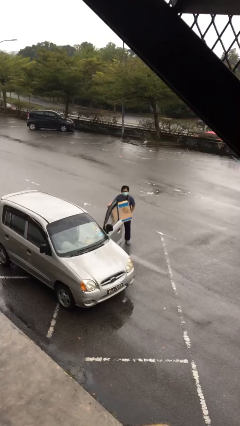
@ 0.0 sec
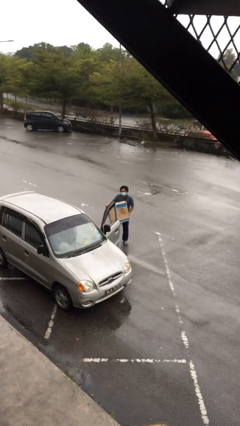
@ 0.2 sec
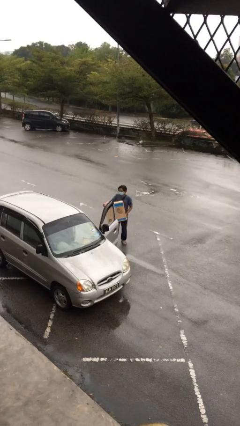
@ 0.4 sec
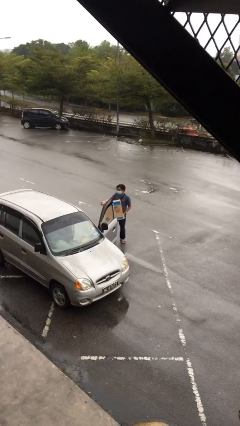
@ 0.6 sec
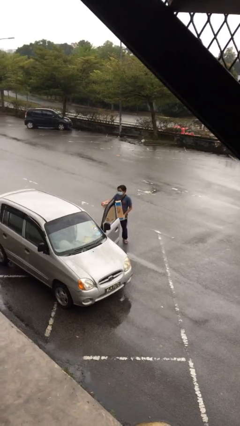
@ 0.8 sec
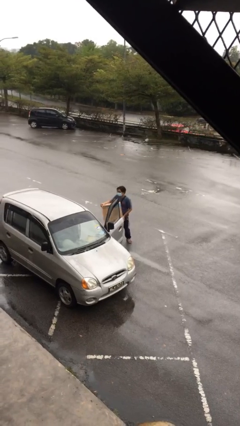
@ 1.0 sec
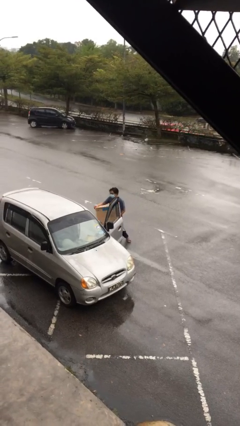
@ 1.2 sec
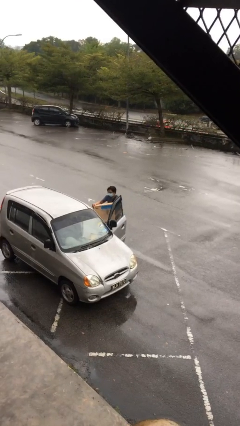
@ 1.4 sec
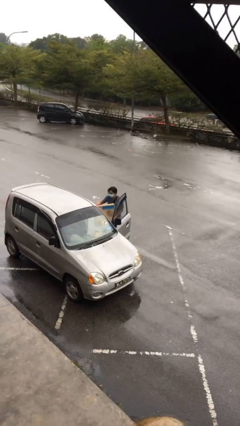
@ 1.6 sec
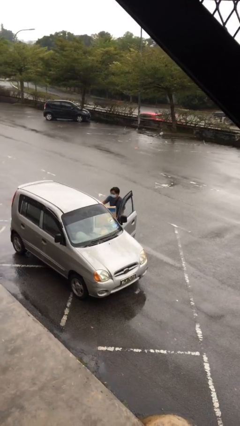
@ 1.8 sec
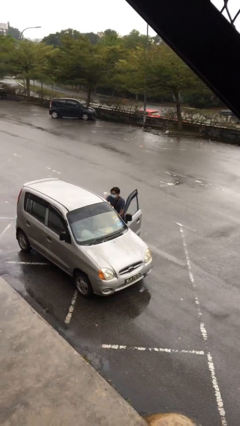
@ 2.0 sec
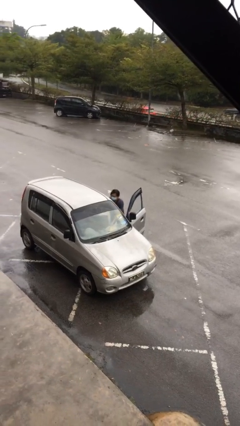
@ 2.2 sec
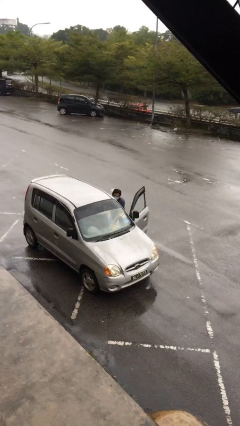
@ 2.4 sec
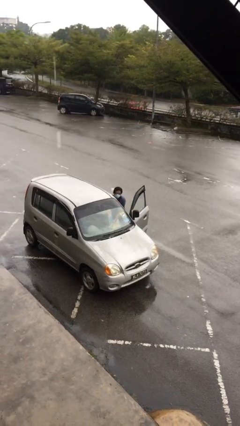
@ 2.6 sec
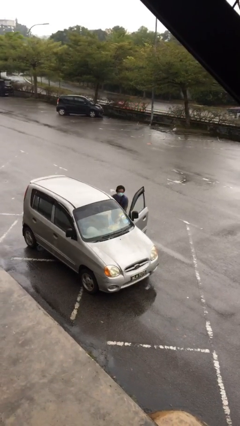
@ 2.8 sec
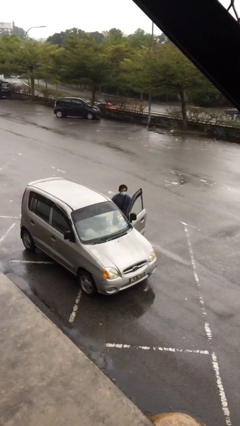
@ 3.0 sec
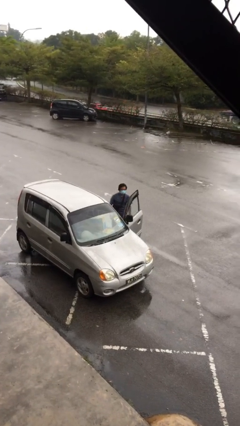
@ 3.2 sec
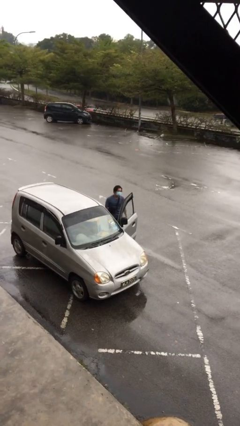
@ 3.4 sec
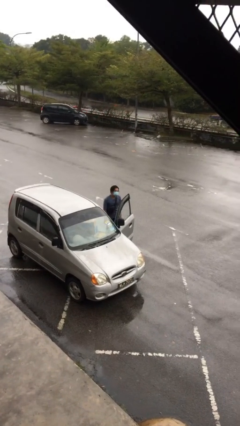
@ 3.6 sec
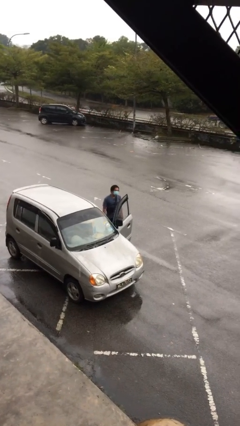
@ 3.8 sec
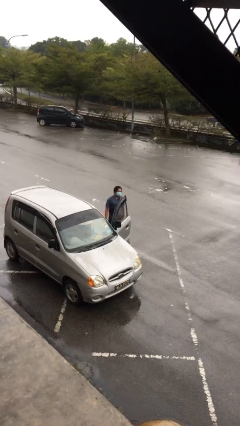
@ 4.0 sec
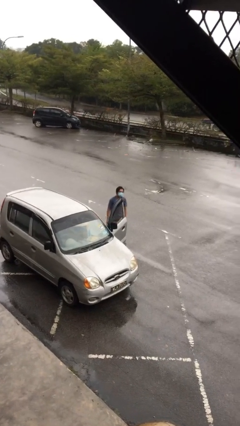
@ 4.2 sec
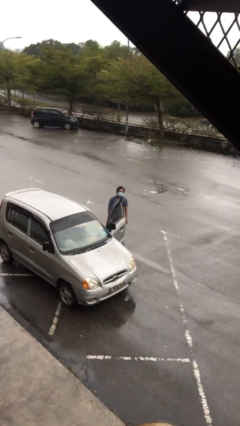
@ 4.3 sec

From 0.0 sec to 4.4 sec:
person loads car

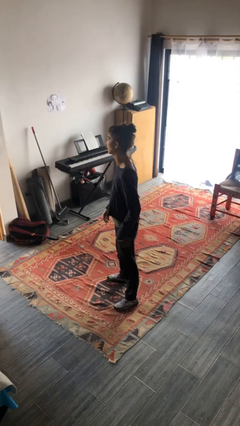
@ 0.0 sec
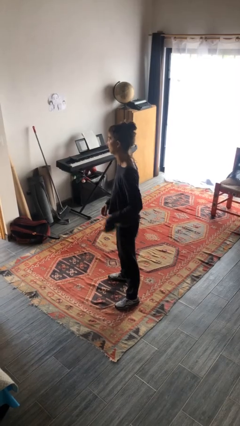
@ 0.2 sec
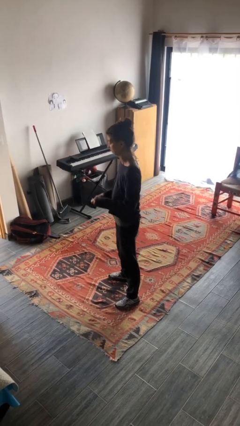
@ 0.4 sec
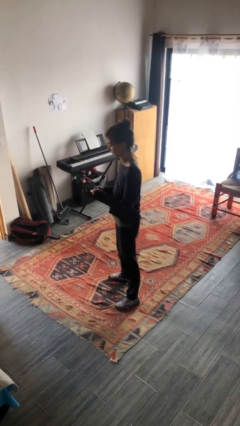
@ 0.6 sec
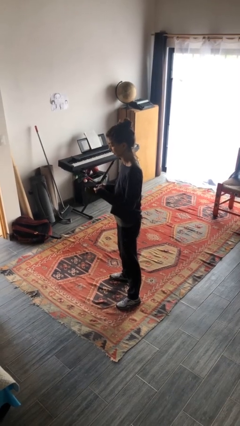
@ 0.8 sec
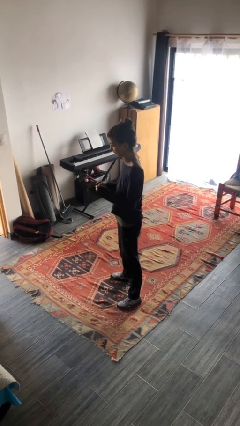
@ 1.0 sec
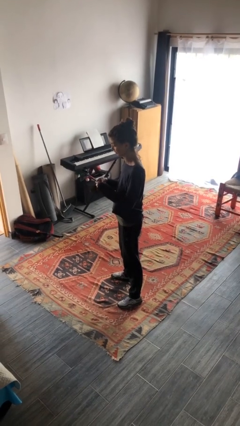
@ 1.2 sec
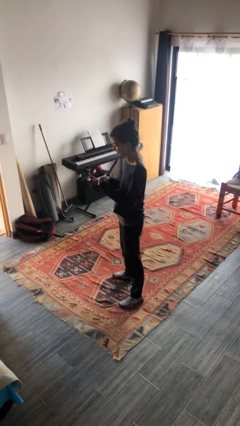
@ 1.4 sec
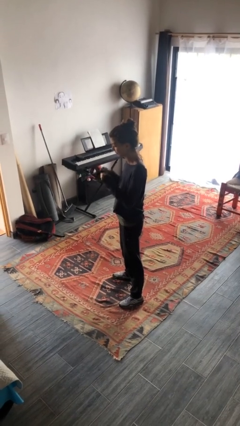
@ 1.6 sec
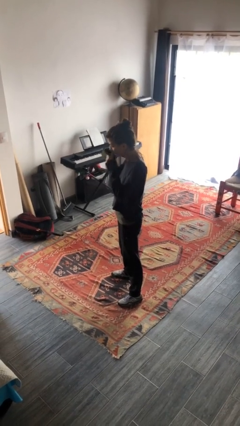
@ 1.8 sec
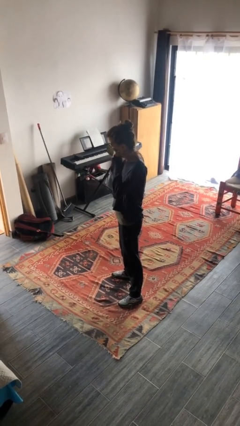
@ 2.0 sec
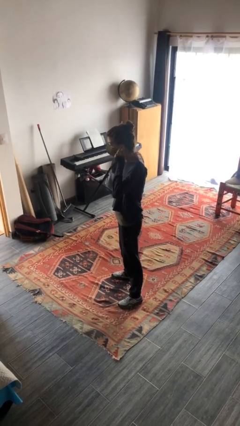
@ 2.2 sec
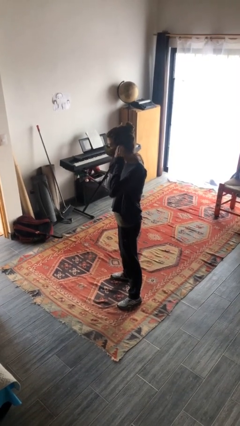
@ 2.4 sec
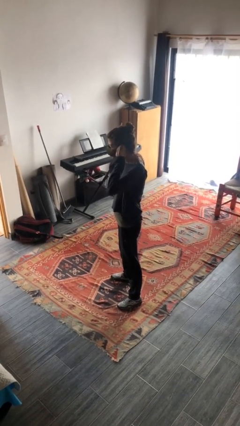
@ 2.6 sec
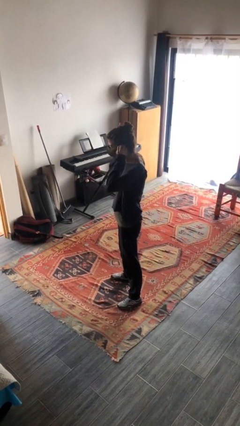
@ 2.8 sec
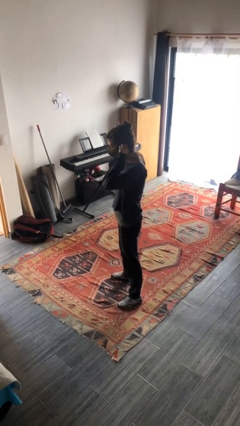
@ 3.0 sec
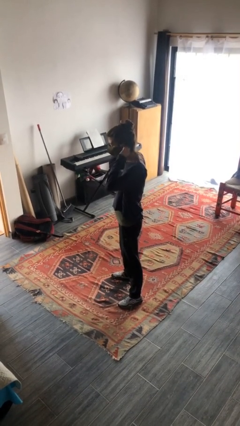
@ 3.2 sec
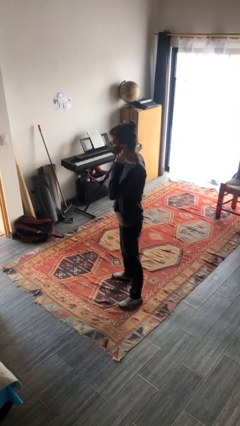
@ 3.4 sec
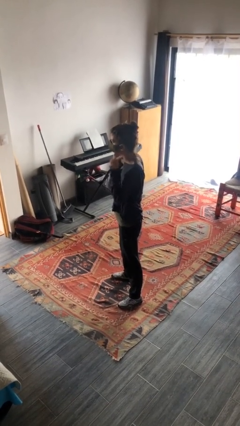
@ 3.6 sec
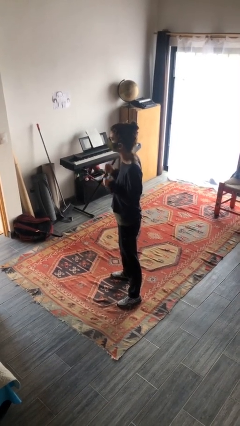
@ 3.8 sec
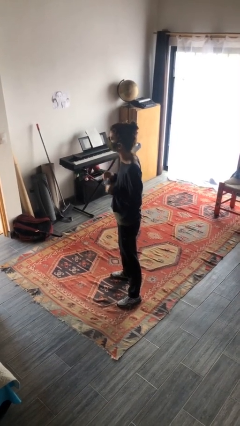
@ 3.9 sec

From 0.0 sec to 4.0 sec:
person puts on facemask

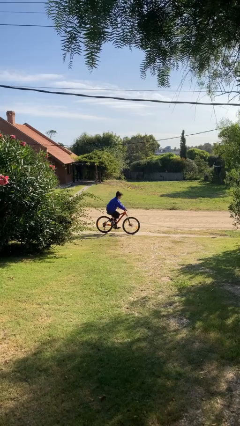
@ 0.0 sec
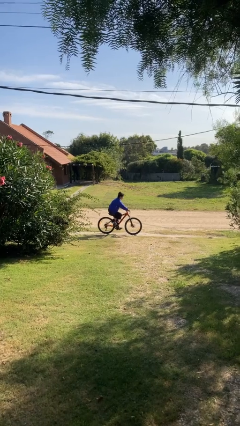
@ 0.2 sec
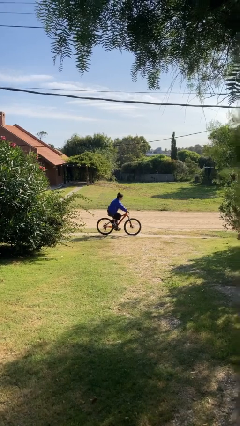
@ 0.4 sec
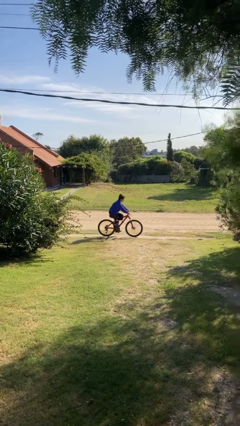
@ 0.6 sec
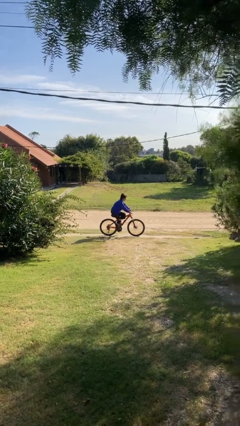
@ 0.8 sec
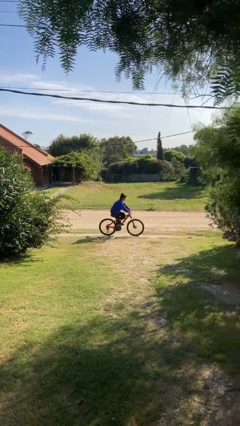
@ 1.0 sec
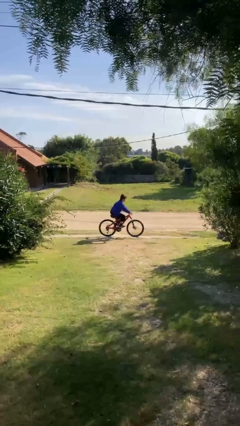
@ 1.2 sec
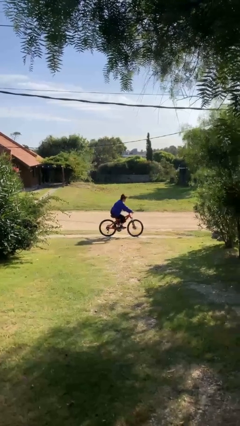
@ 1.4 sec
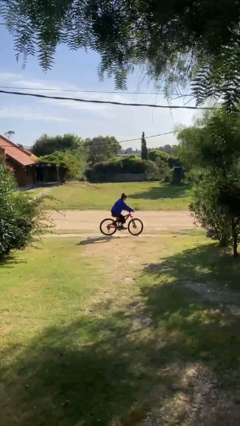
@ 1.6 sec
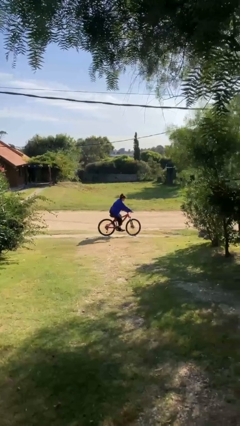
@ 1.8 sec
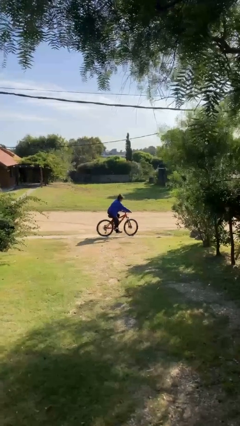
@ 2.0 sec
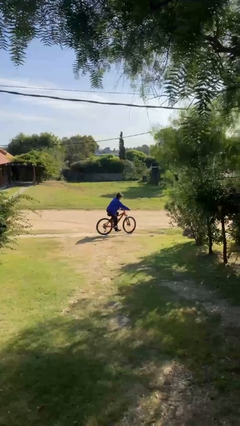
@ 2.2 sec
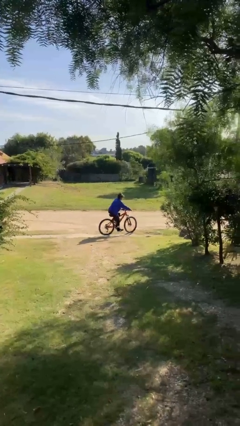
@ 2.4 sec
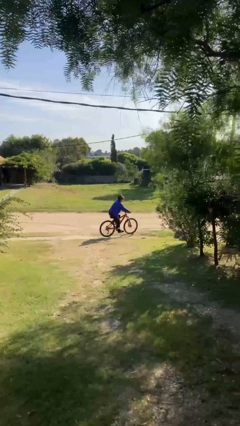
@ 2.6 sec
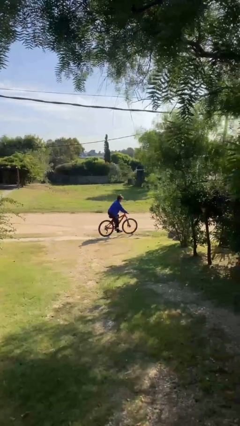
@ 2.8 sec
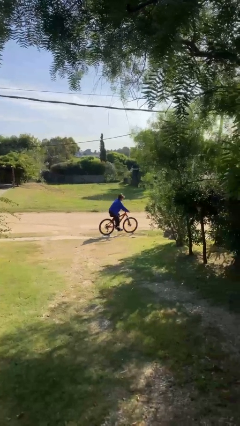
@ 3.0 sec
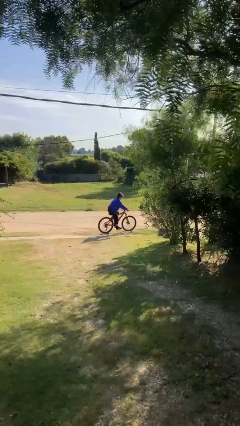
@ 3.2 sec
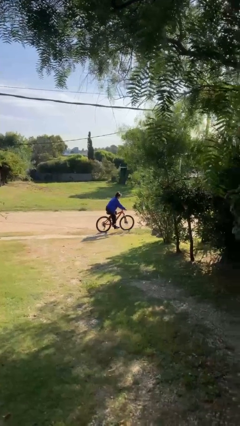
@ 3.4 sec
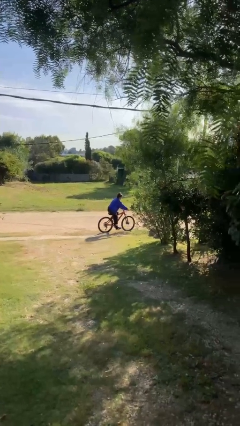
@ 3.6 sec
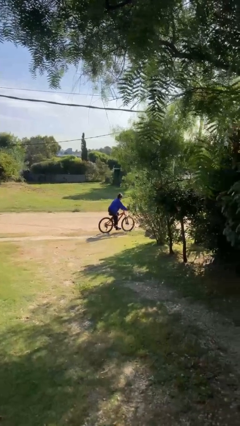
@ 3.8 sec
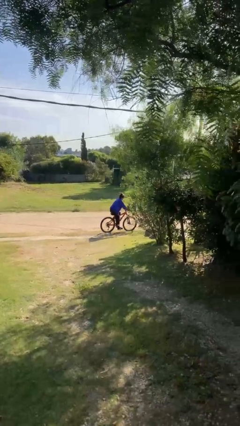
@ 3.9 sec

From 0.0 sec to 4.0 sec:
person rides bicycle

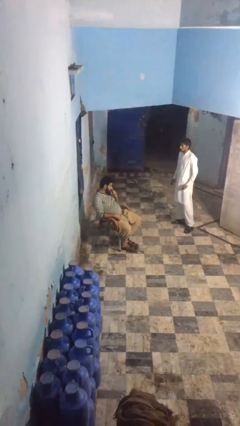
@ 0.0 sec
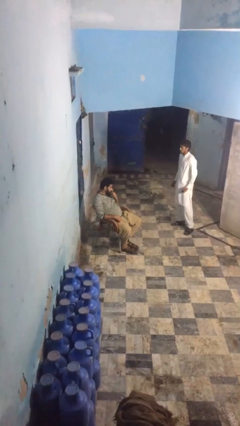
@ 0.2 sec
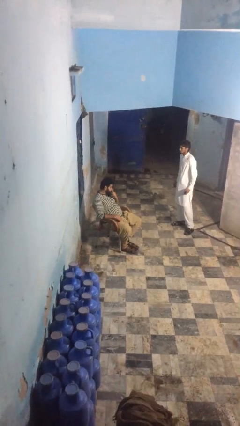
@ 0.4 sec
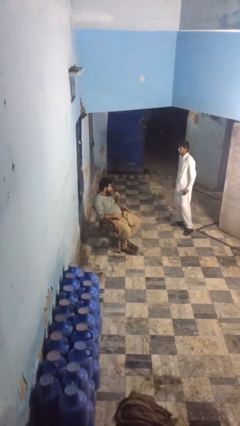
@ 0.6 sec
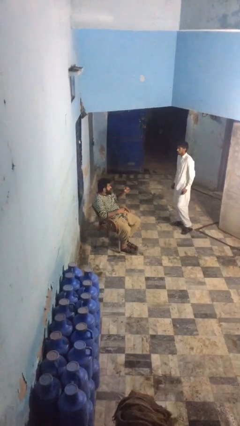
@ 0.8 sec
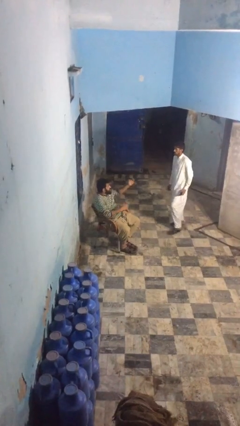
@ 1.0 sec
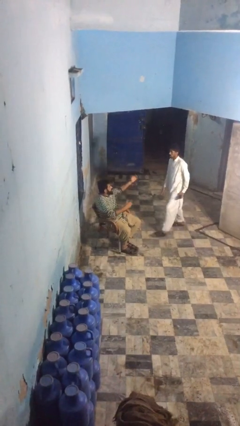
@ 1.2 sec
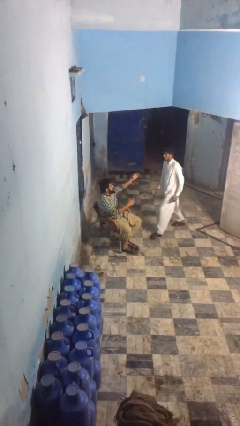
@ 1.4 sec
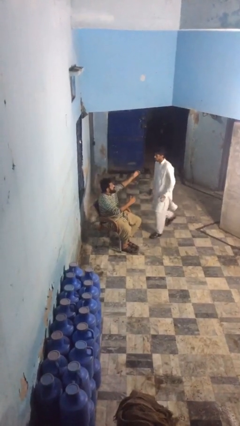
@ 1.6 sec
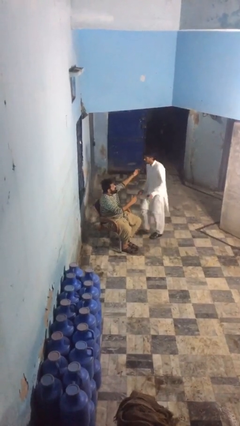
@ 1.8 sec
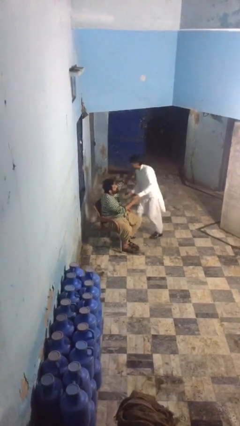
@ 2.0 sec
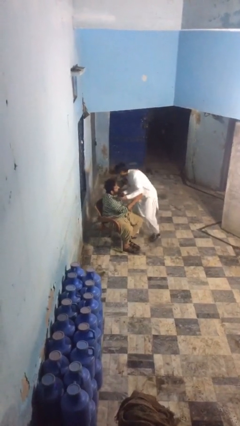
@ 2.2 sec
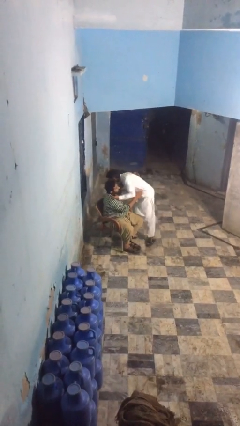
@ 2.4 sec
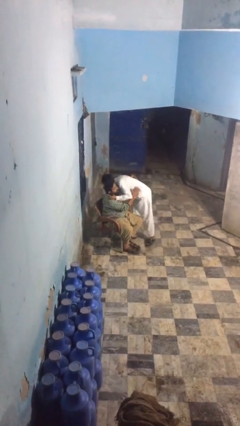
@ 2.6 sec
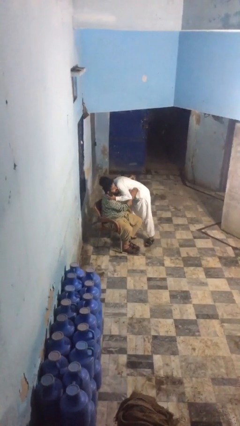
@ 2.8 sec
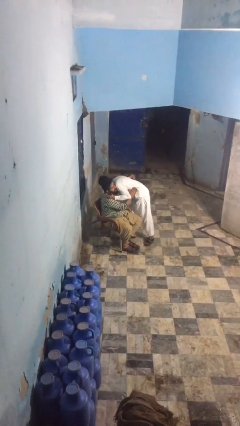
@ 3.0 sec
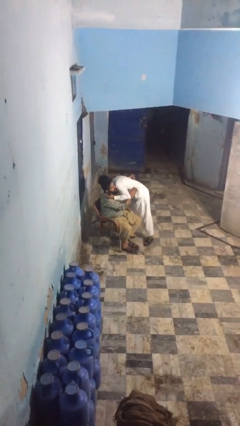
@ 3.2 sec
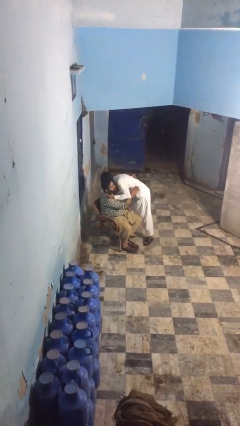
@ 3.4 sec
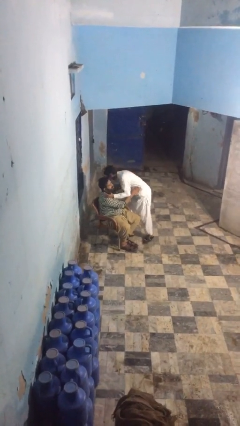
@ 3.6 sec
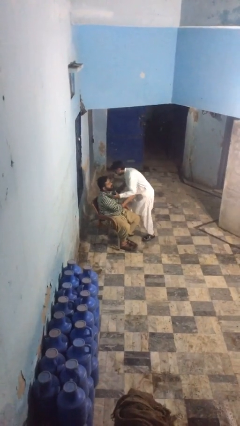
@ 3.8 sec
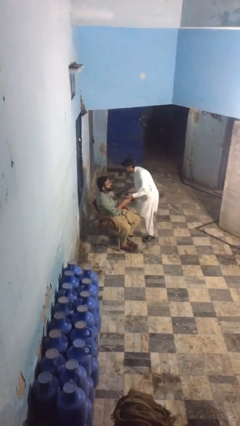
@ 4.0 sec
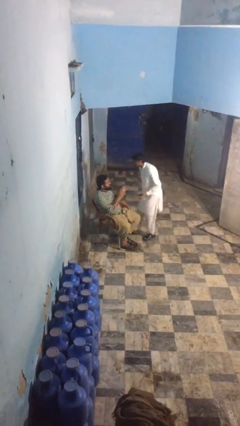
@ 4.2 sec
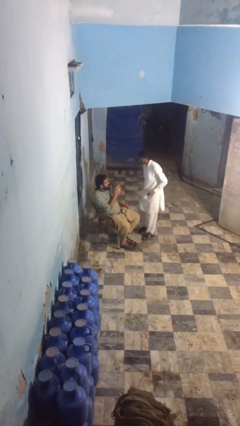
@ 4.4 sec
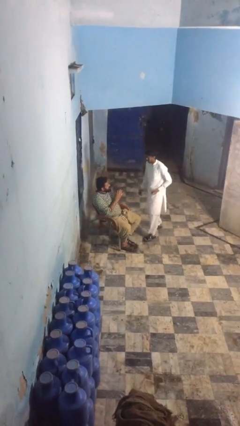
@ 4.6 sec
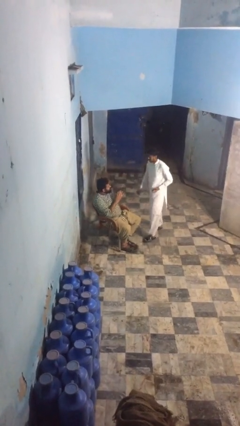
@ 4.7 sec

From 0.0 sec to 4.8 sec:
person embraces person

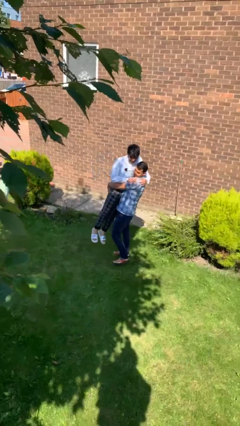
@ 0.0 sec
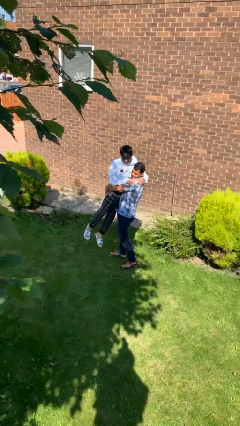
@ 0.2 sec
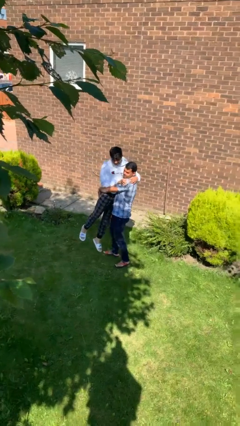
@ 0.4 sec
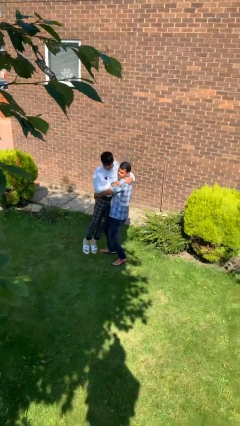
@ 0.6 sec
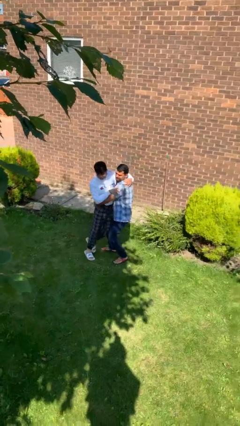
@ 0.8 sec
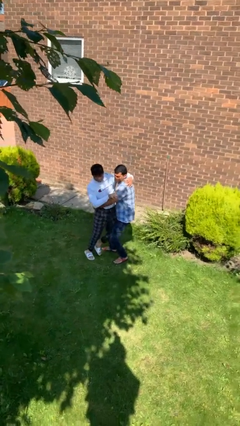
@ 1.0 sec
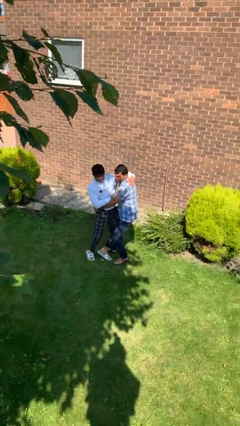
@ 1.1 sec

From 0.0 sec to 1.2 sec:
person puts down person
